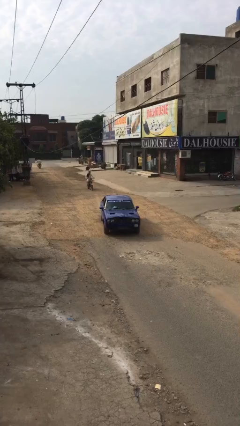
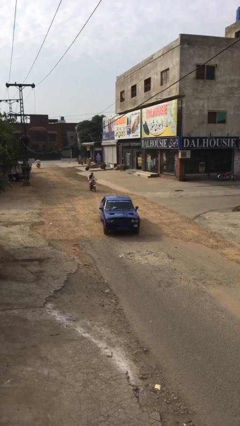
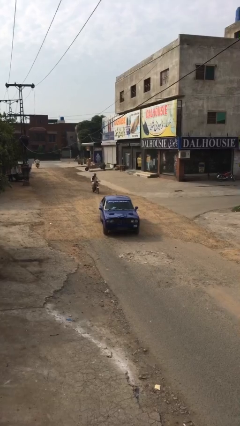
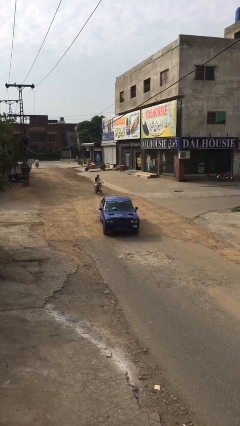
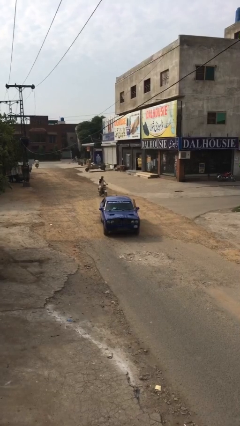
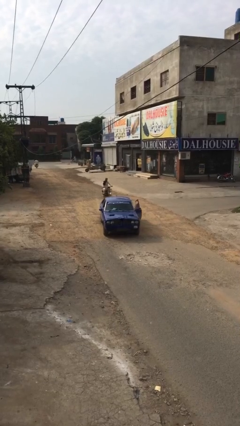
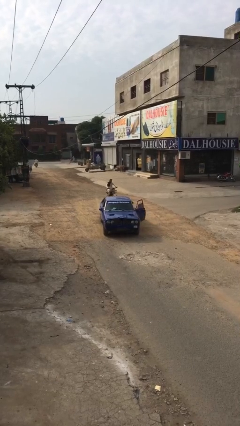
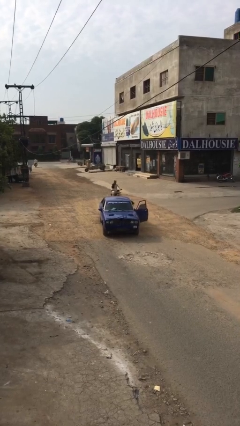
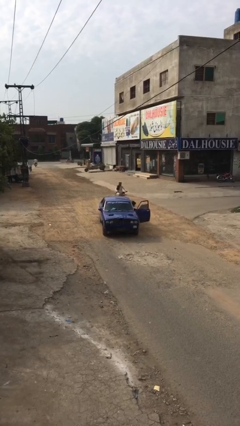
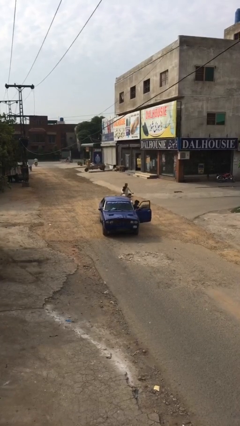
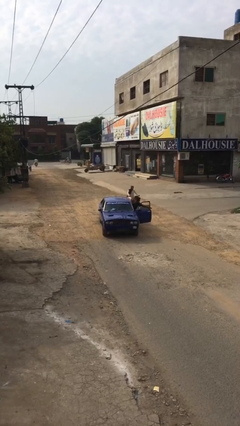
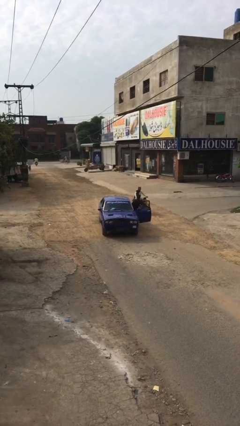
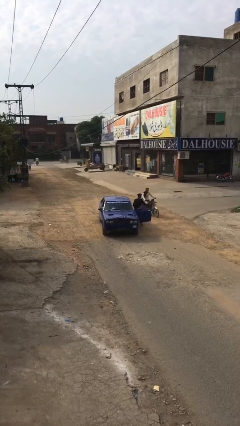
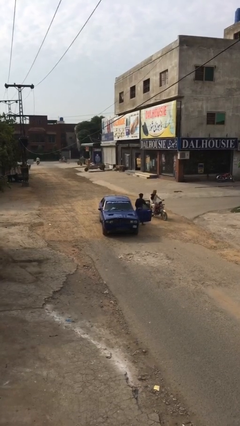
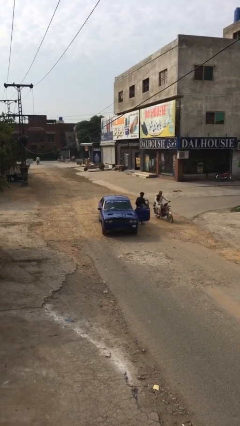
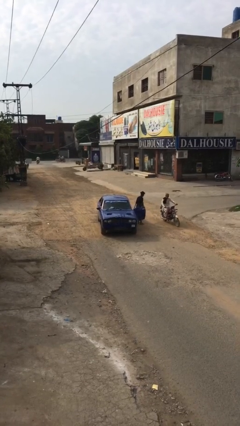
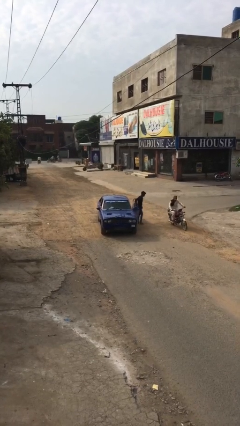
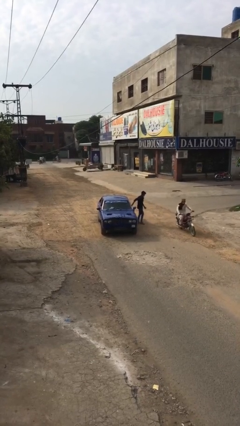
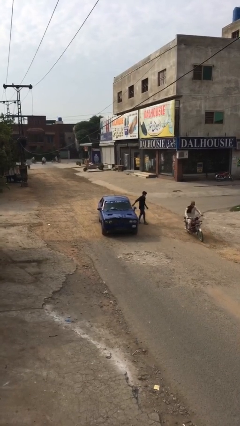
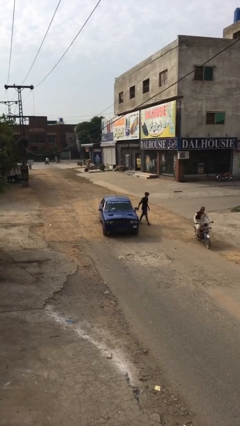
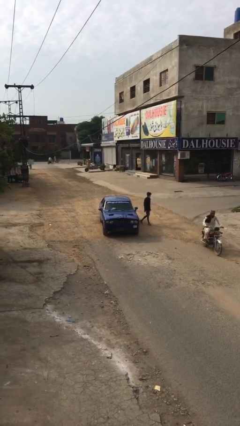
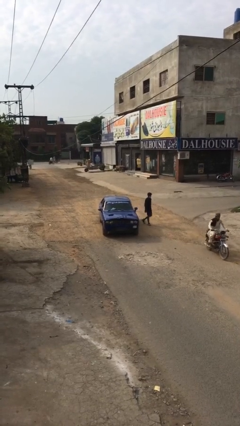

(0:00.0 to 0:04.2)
car drops off person

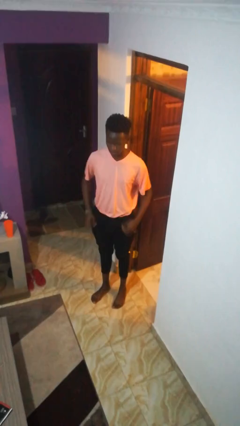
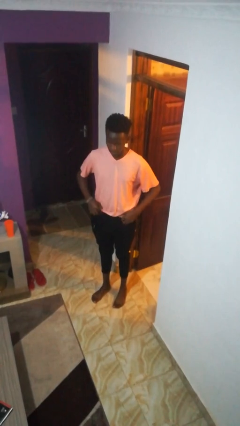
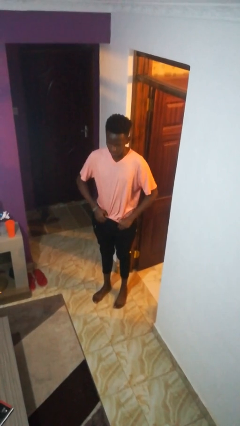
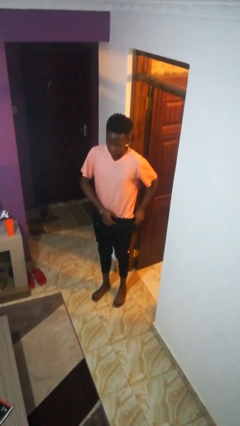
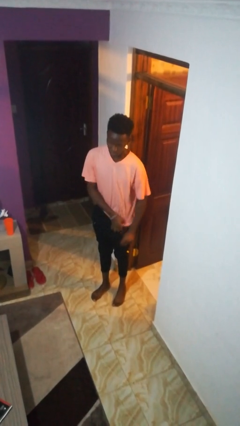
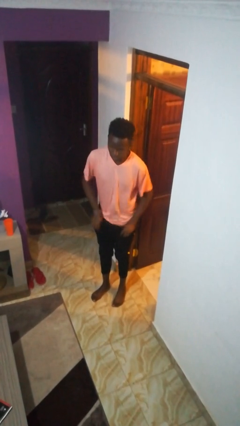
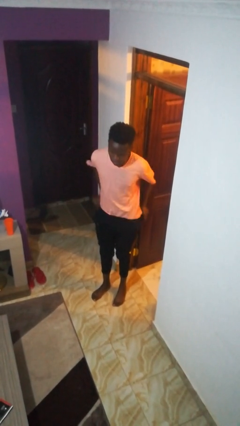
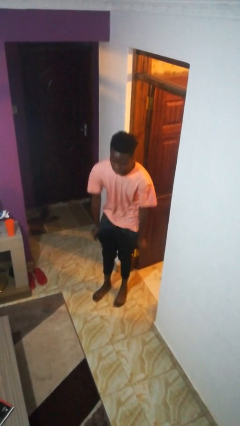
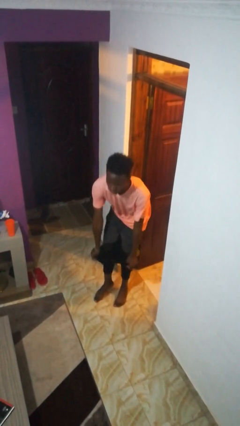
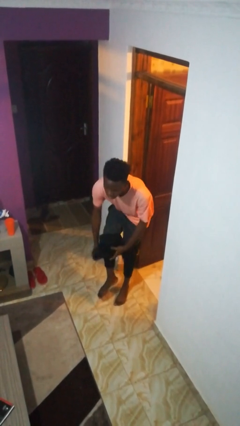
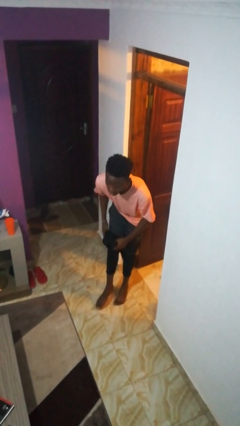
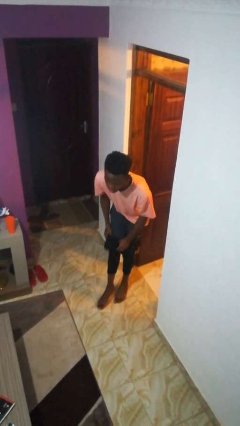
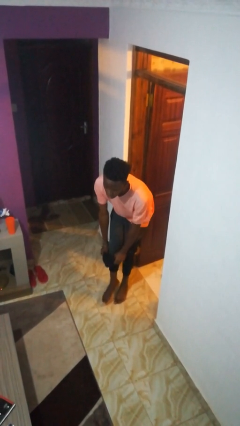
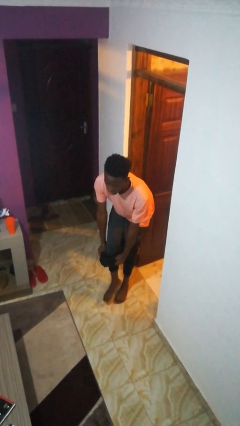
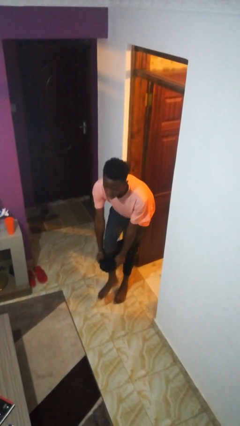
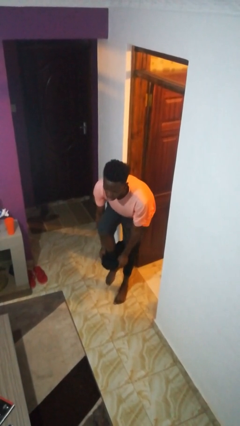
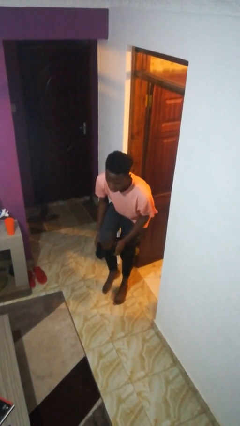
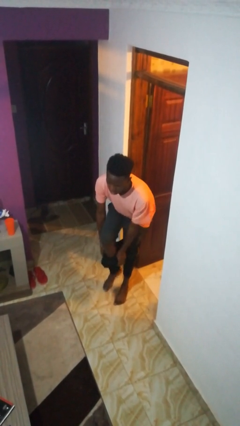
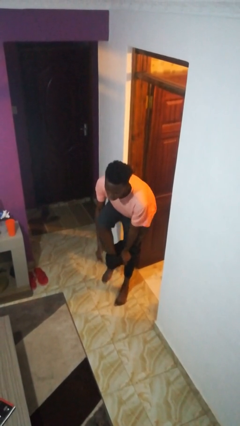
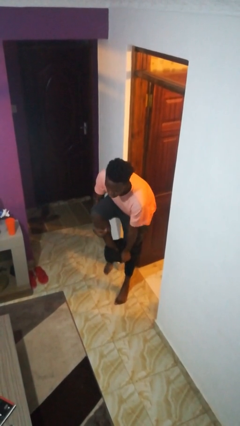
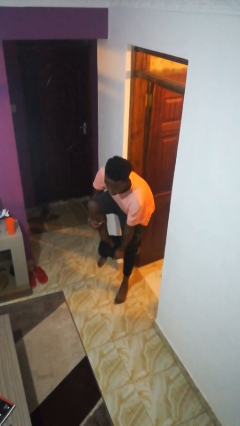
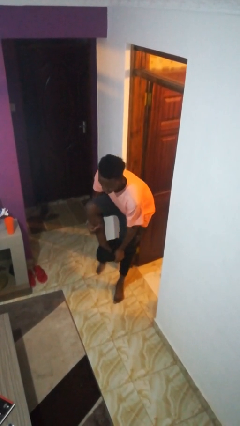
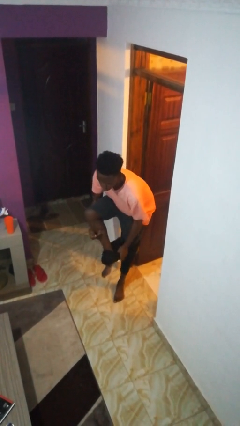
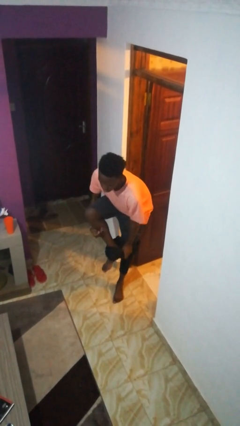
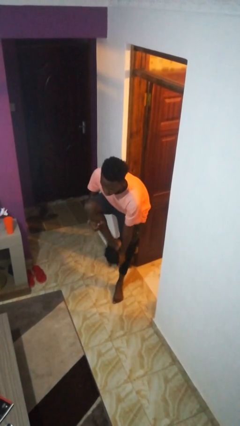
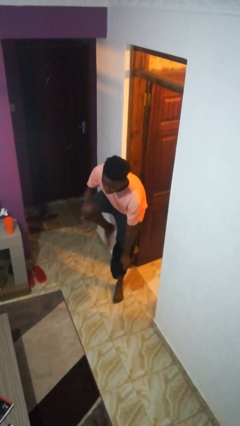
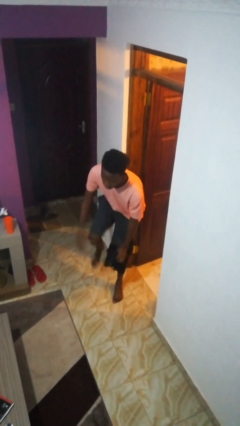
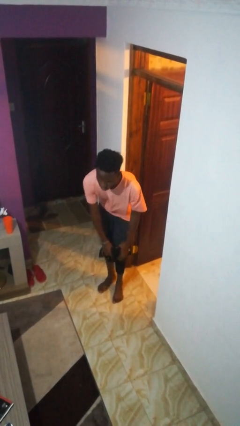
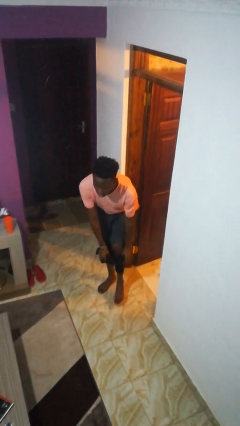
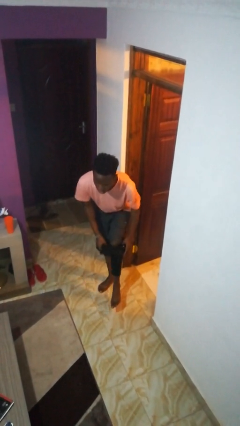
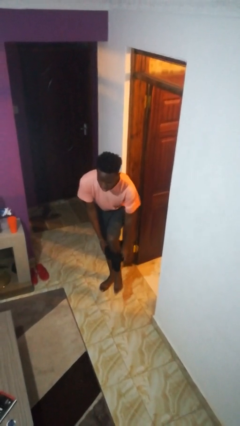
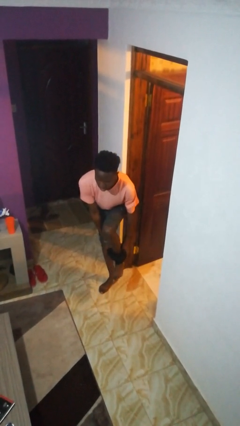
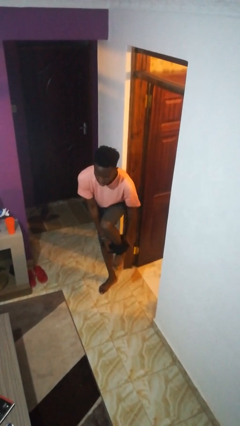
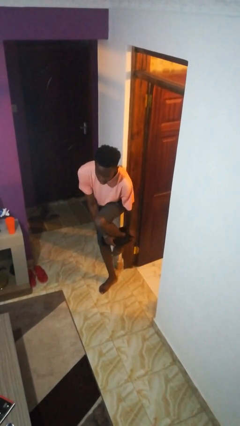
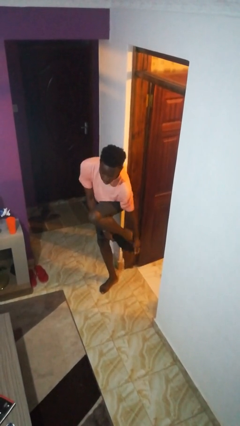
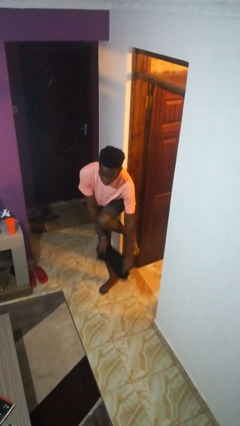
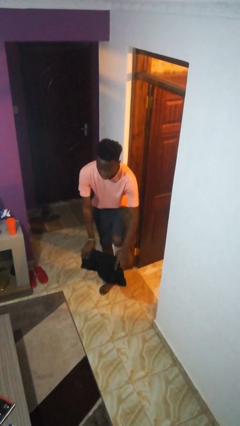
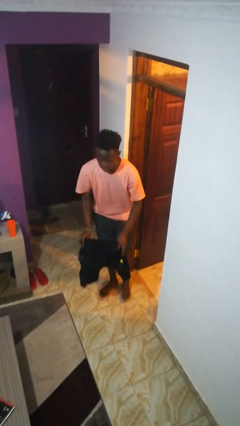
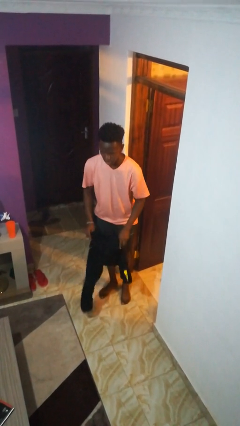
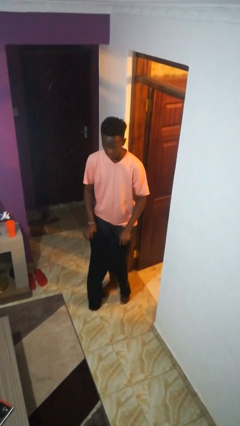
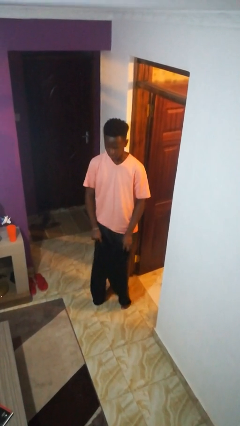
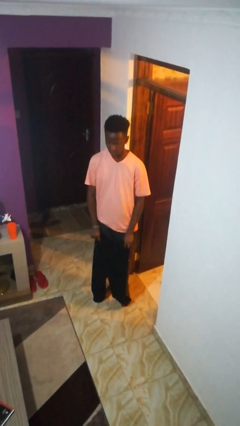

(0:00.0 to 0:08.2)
person takes off pants

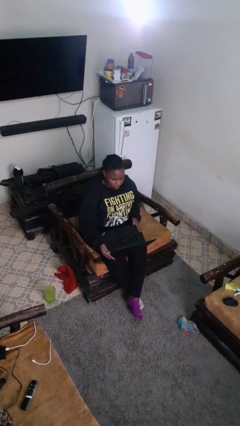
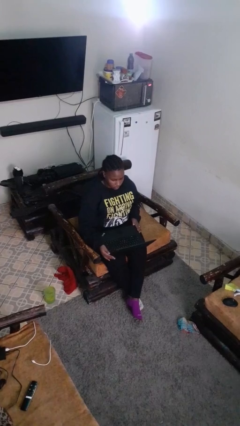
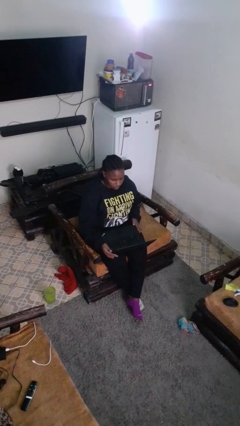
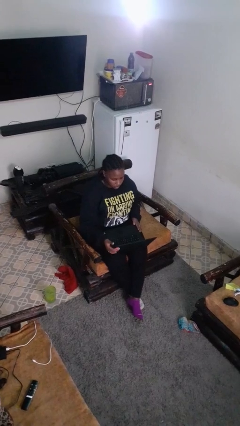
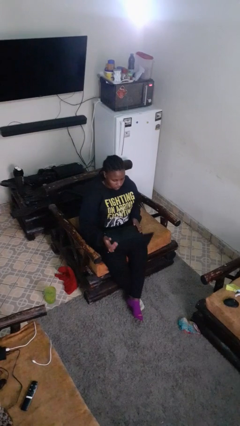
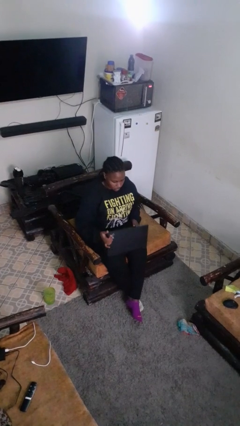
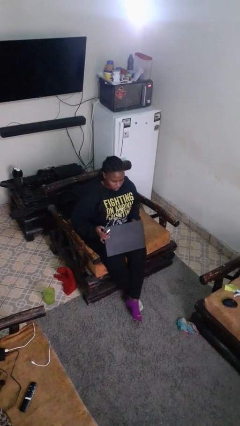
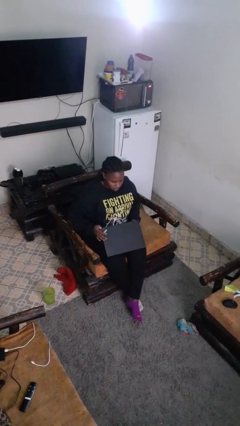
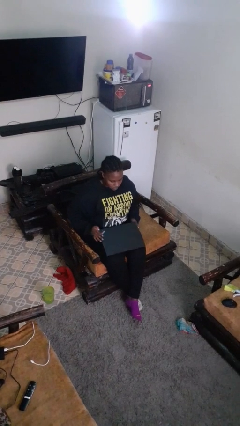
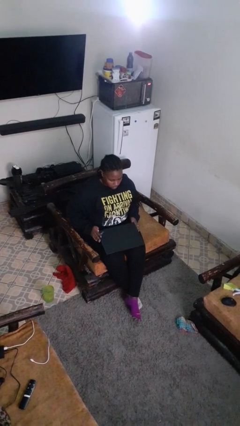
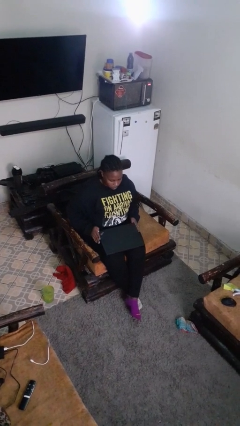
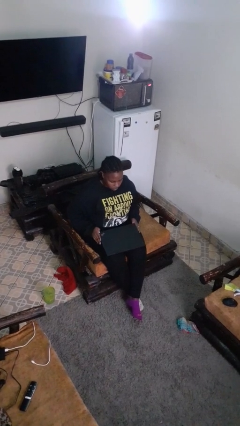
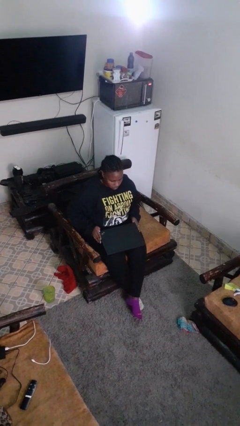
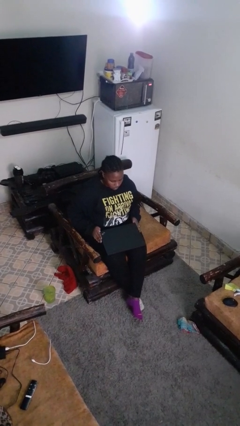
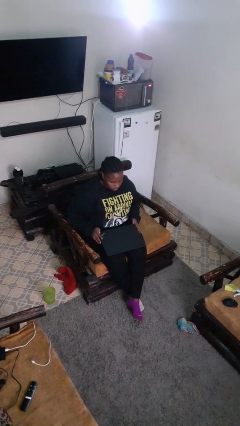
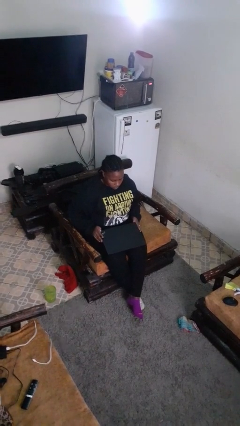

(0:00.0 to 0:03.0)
person closes laptop

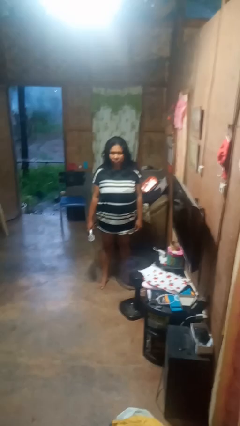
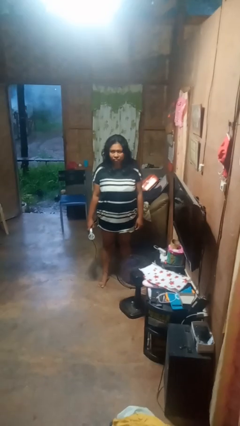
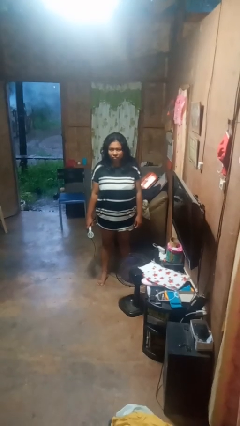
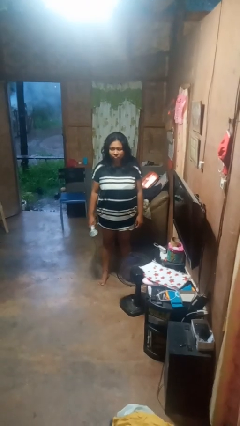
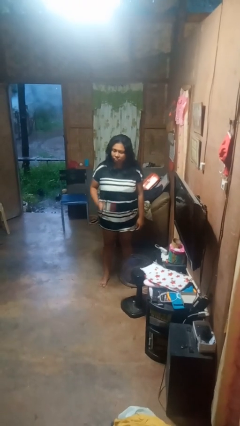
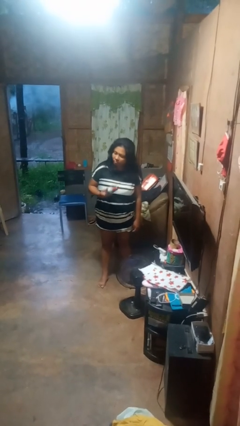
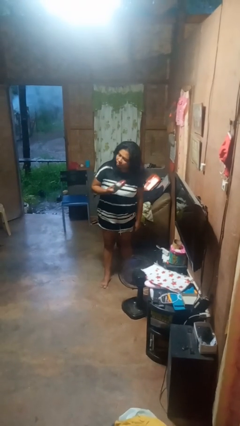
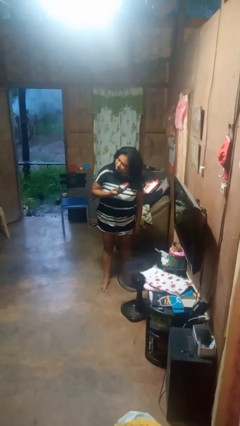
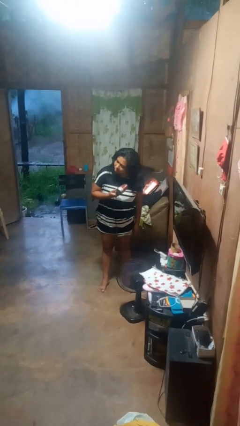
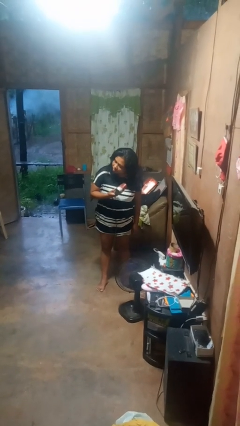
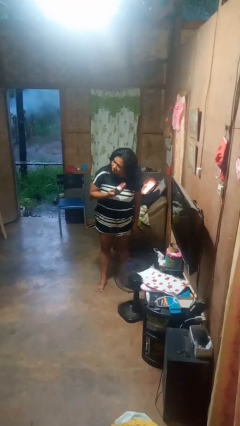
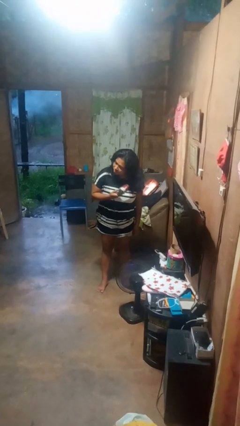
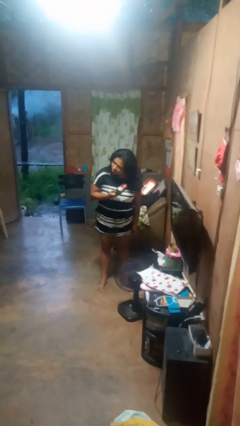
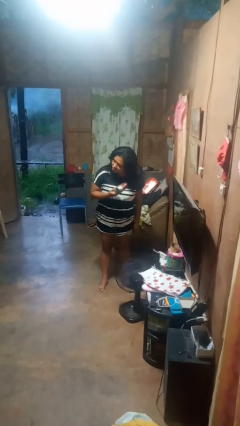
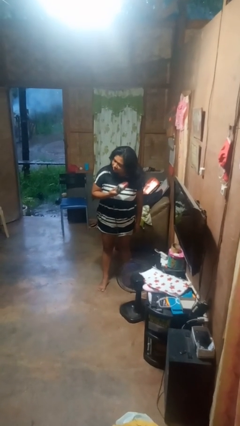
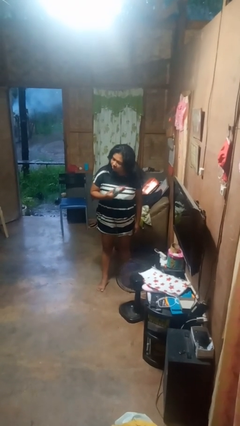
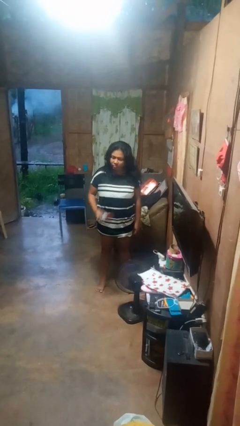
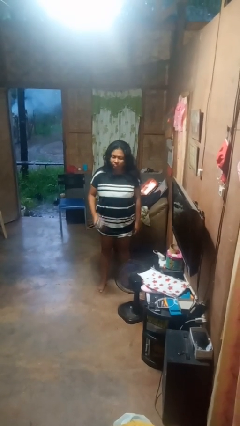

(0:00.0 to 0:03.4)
person dries hair with hairdryer
